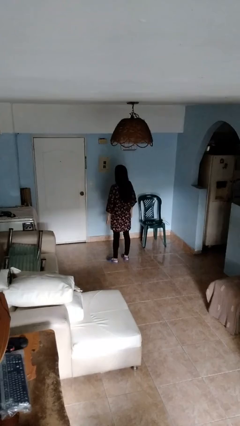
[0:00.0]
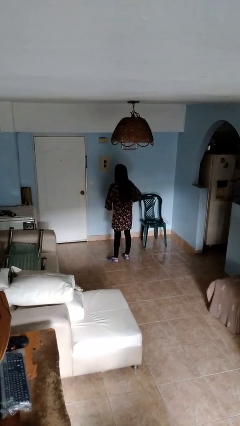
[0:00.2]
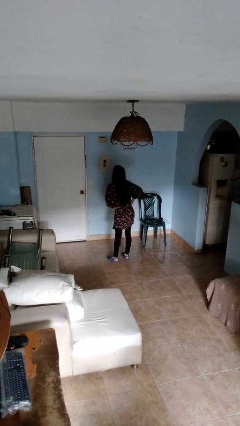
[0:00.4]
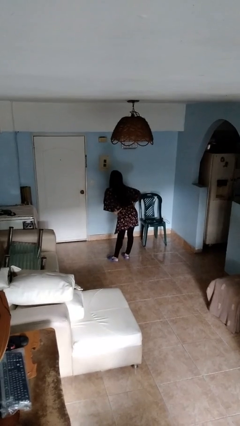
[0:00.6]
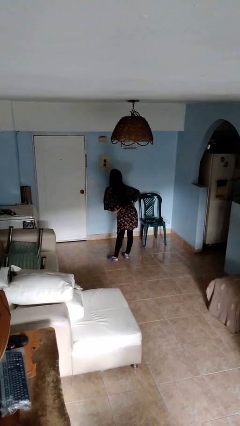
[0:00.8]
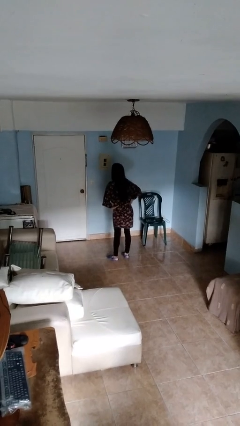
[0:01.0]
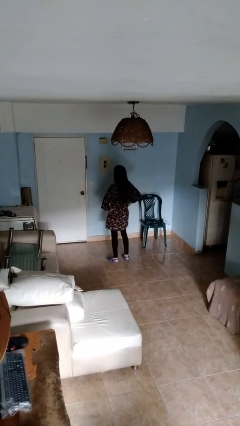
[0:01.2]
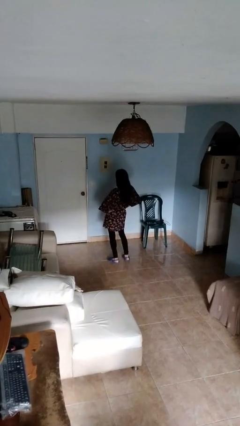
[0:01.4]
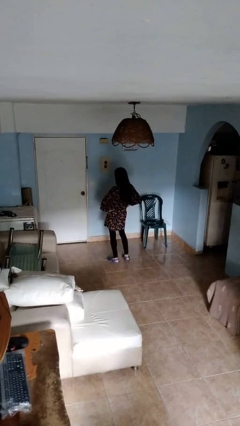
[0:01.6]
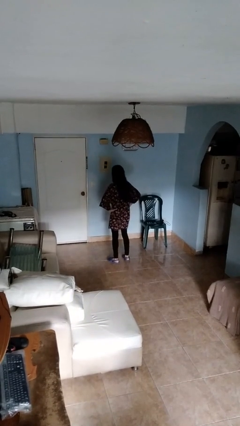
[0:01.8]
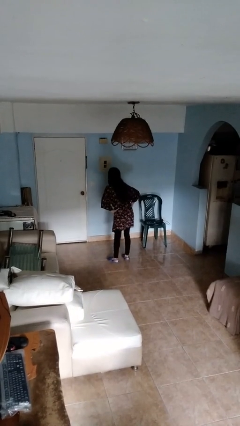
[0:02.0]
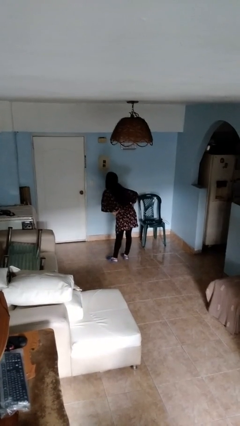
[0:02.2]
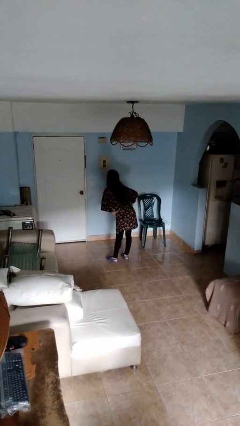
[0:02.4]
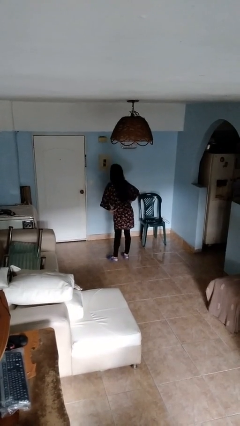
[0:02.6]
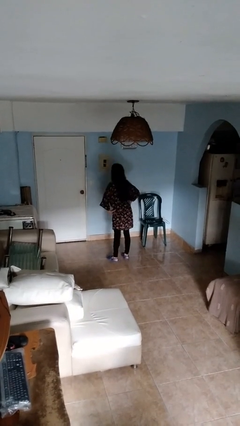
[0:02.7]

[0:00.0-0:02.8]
person wiggles hips

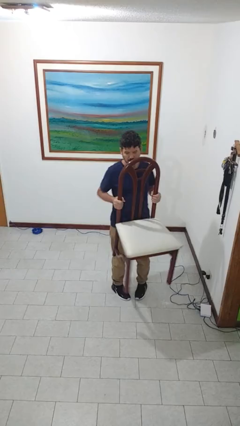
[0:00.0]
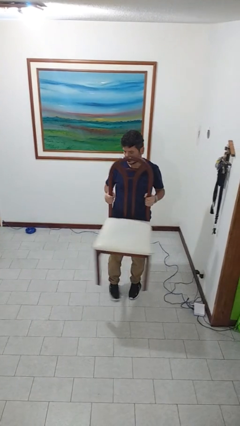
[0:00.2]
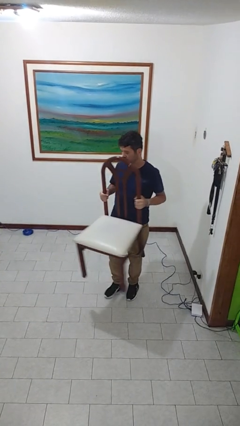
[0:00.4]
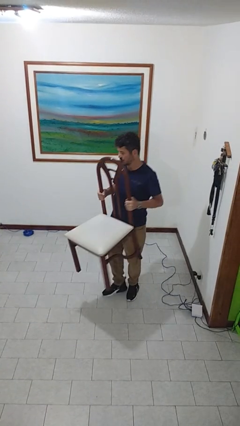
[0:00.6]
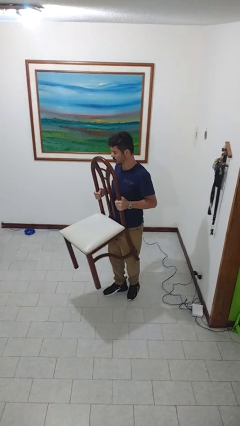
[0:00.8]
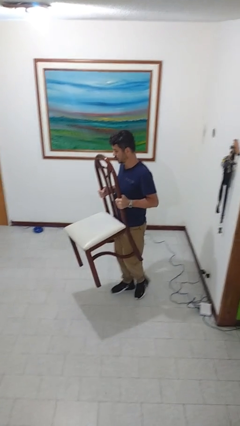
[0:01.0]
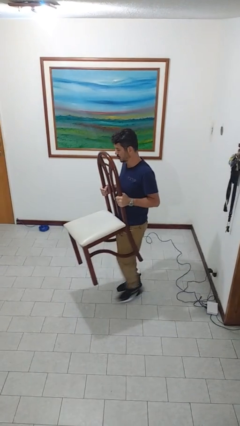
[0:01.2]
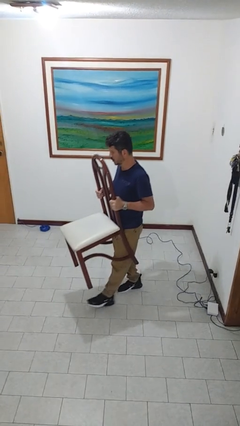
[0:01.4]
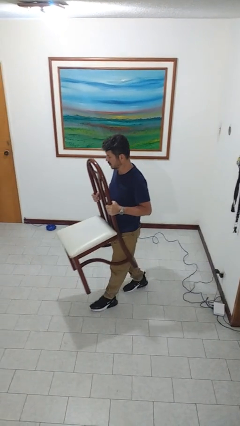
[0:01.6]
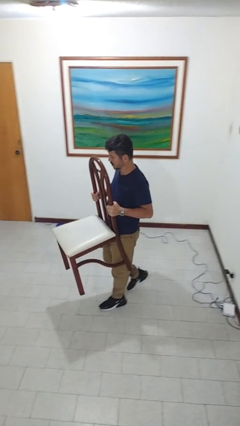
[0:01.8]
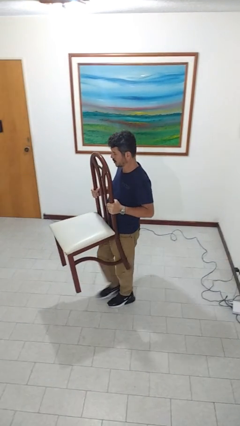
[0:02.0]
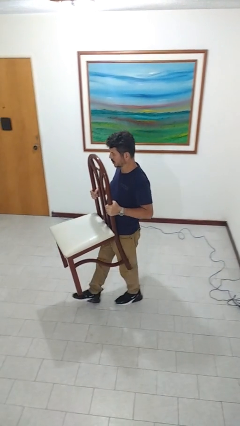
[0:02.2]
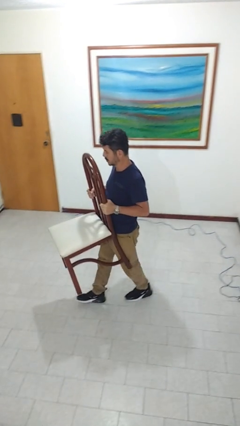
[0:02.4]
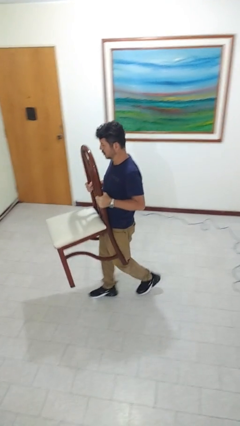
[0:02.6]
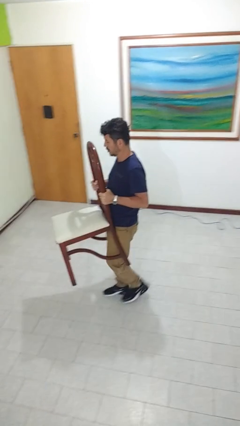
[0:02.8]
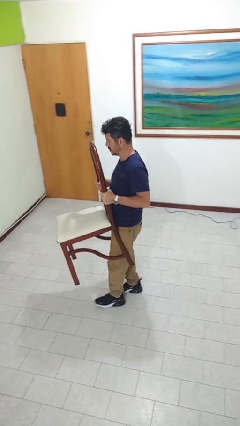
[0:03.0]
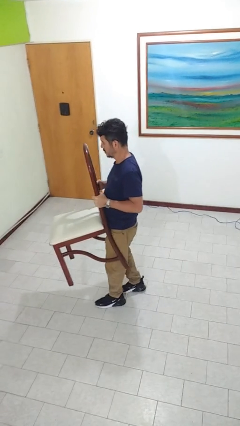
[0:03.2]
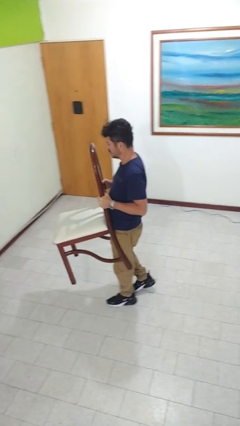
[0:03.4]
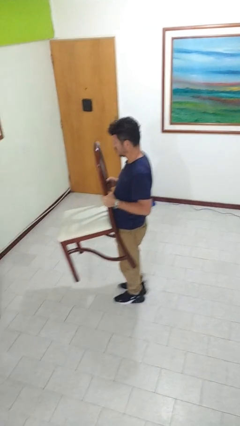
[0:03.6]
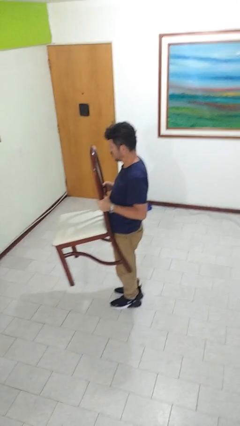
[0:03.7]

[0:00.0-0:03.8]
person carries furniture

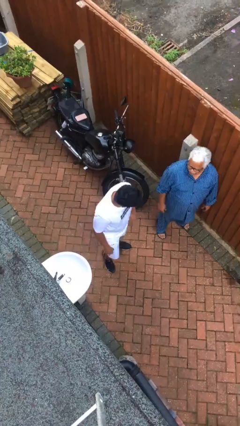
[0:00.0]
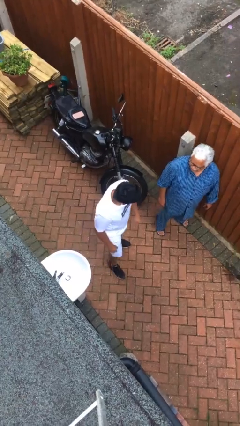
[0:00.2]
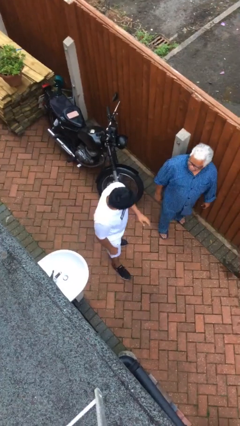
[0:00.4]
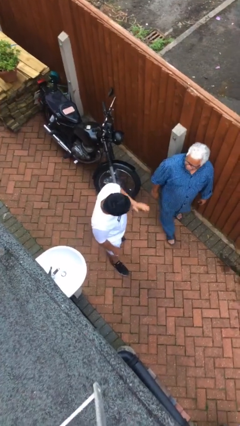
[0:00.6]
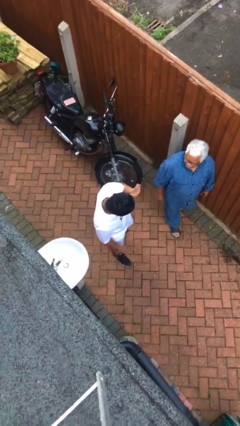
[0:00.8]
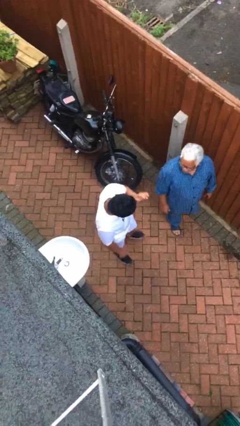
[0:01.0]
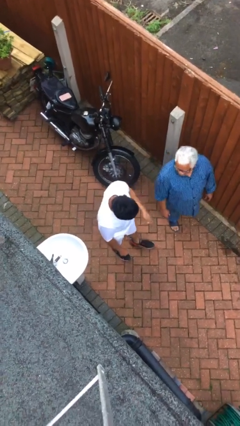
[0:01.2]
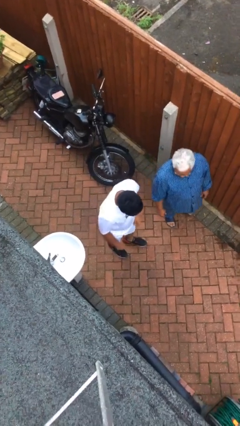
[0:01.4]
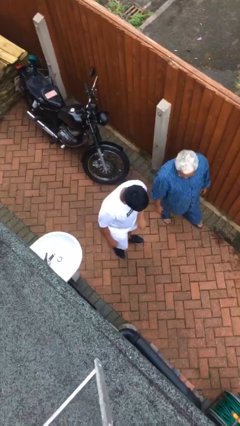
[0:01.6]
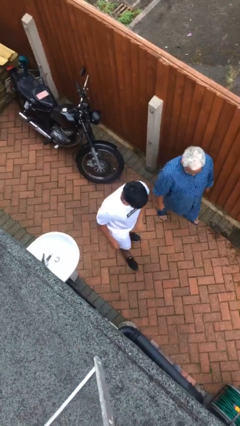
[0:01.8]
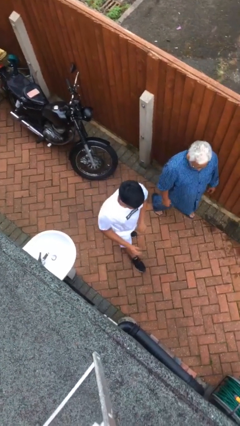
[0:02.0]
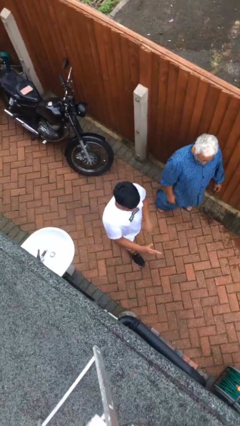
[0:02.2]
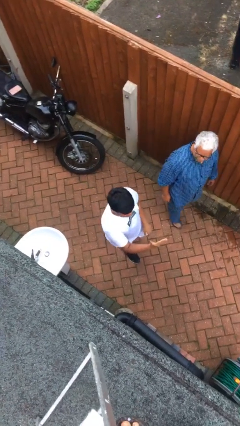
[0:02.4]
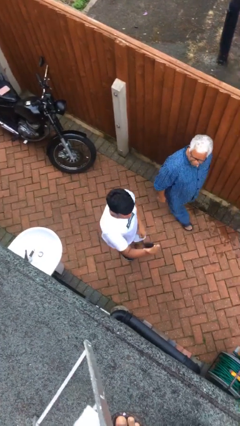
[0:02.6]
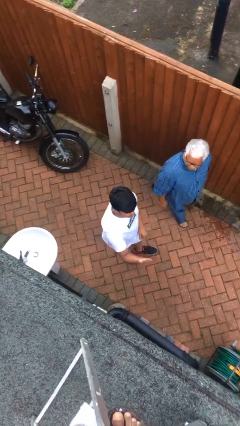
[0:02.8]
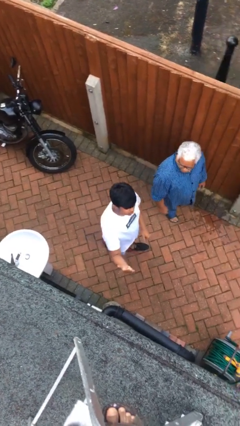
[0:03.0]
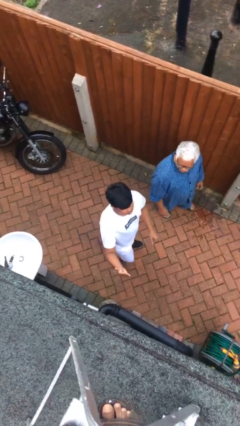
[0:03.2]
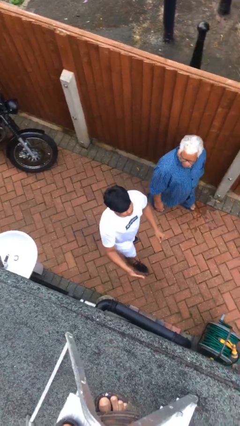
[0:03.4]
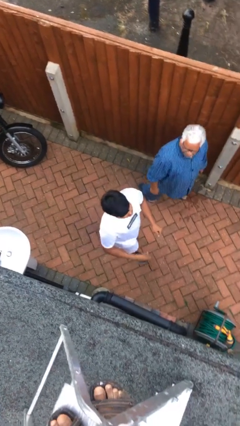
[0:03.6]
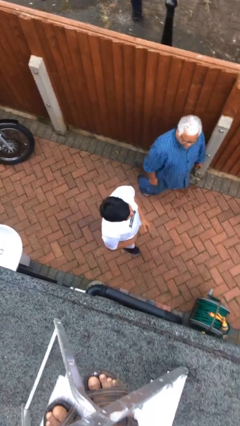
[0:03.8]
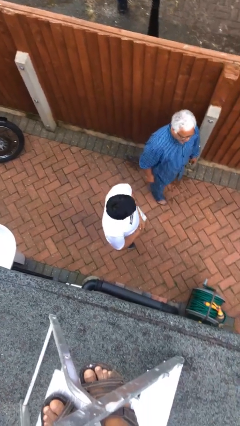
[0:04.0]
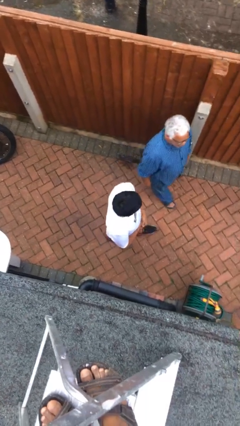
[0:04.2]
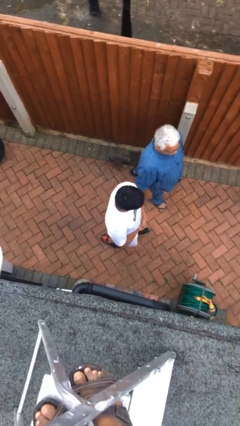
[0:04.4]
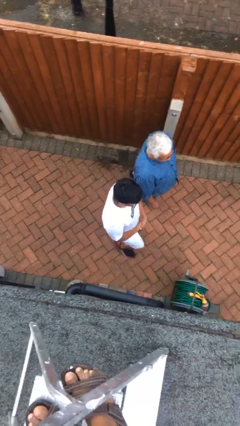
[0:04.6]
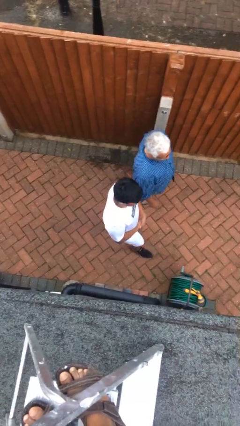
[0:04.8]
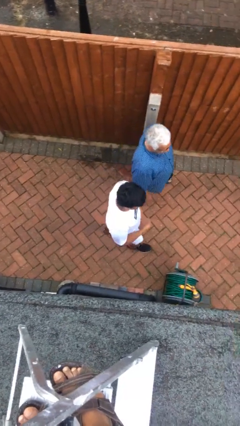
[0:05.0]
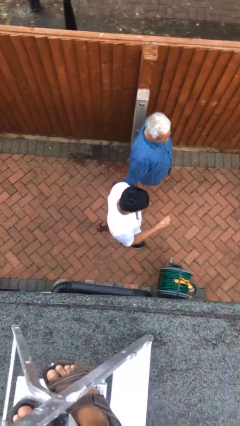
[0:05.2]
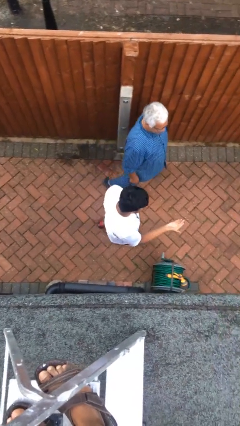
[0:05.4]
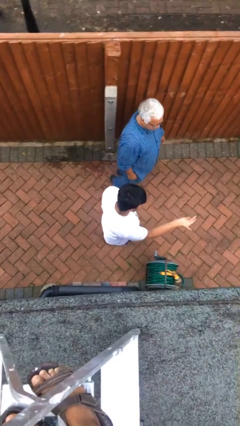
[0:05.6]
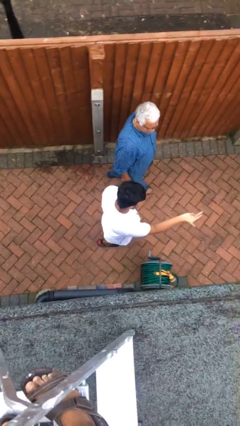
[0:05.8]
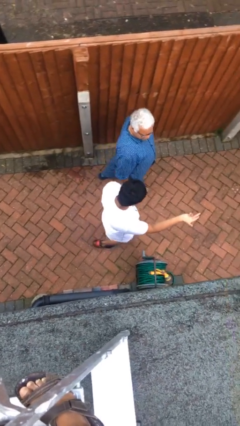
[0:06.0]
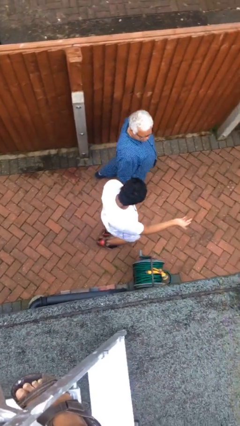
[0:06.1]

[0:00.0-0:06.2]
person talks to person

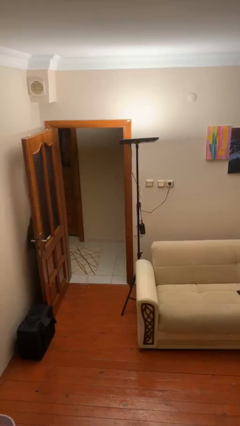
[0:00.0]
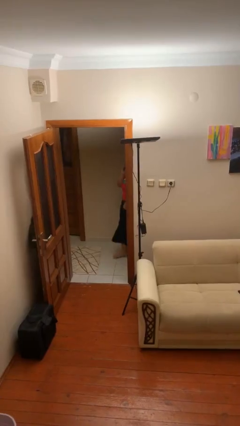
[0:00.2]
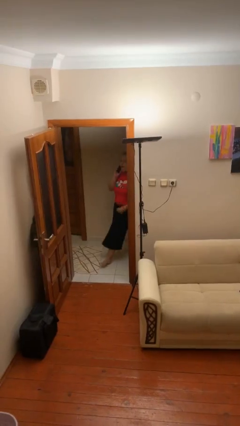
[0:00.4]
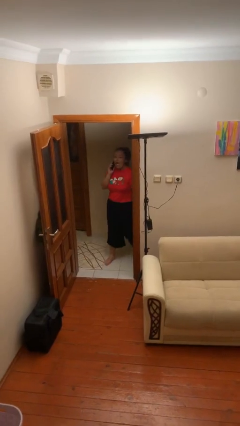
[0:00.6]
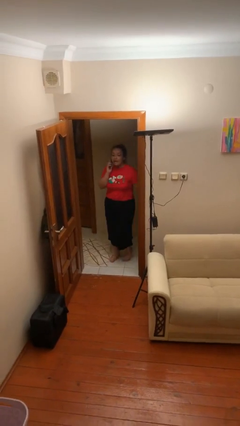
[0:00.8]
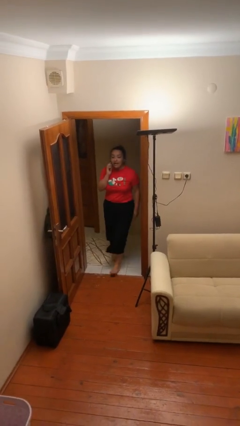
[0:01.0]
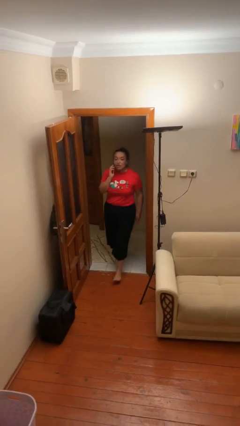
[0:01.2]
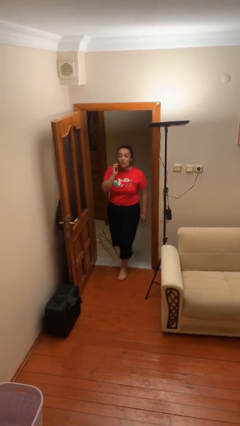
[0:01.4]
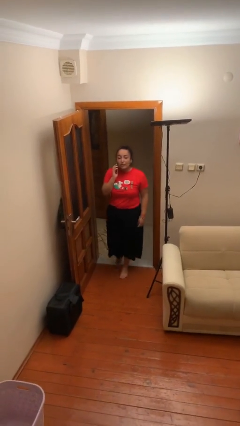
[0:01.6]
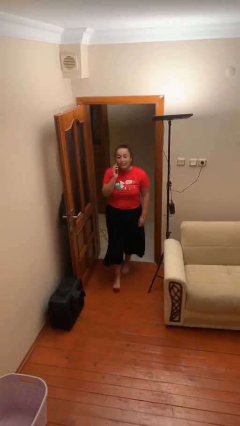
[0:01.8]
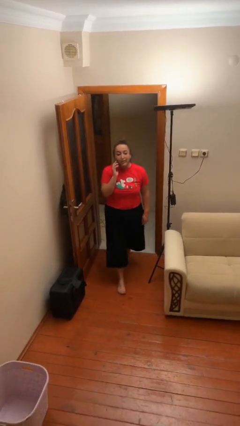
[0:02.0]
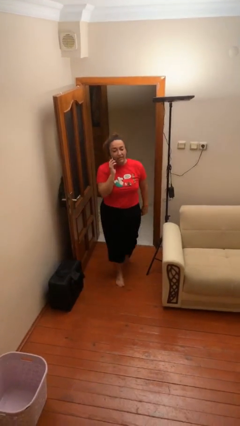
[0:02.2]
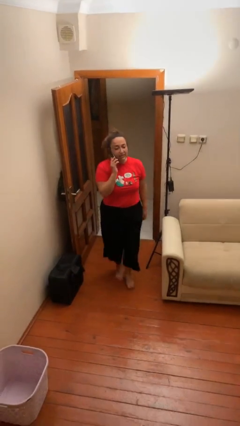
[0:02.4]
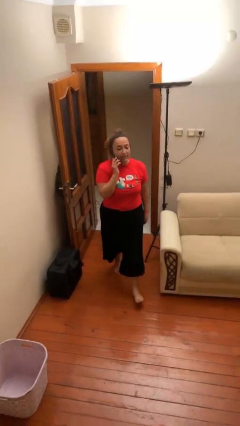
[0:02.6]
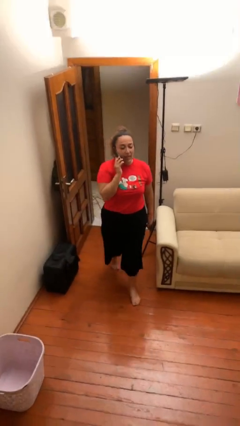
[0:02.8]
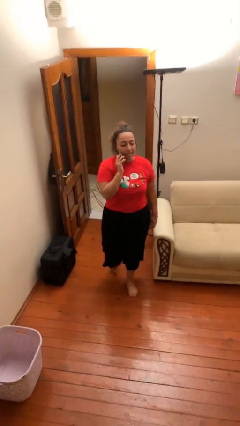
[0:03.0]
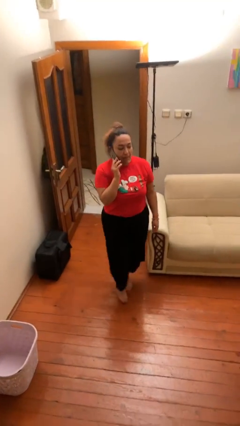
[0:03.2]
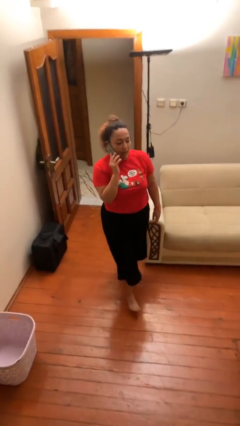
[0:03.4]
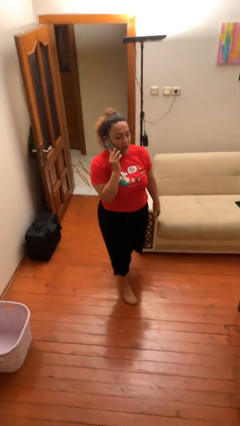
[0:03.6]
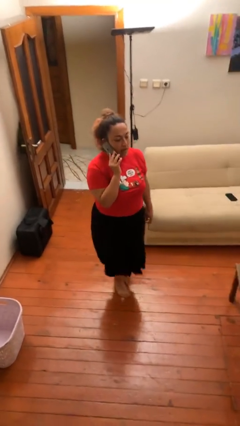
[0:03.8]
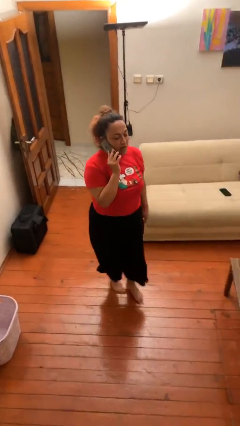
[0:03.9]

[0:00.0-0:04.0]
person enters scene through structure

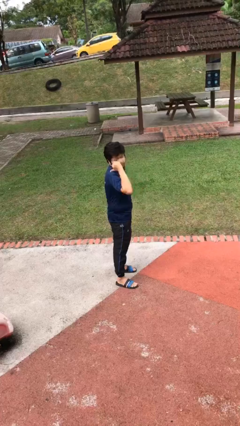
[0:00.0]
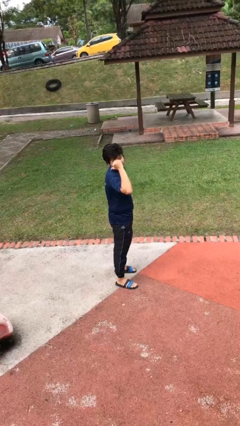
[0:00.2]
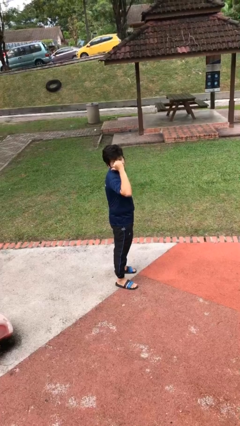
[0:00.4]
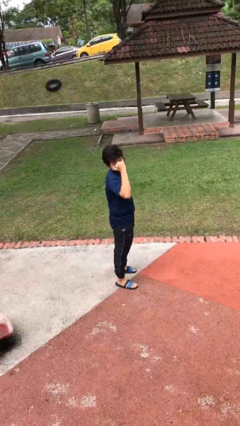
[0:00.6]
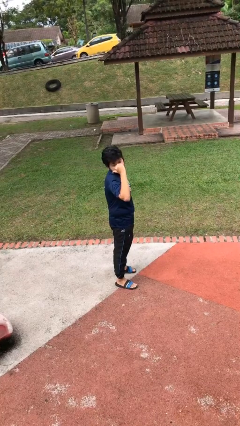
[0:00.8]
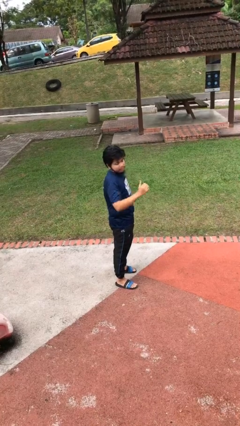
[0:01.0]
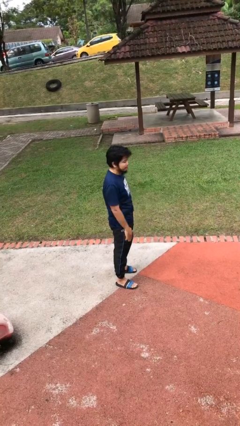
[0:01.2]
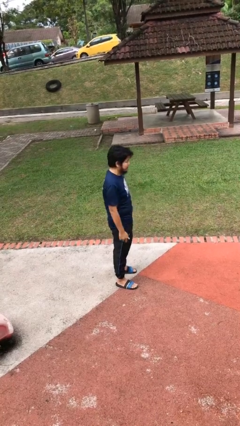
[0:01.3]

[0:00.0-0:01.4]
person gestures behind me
